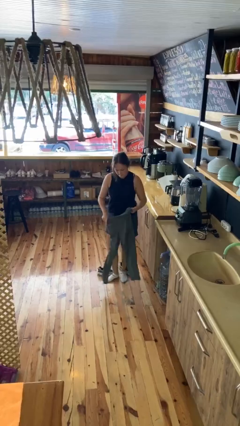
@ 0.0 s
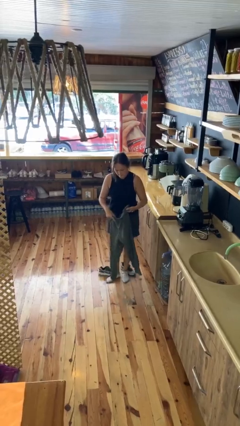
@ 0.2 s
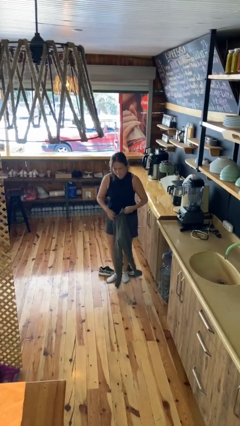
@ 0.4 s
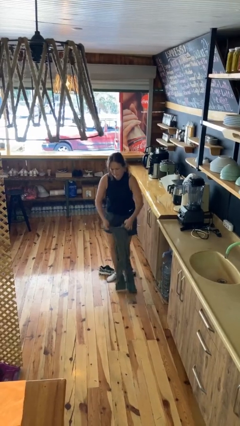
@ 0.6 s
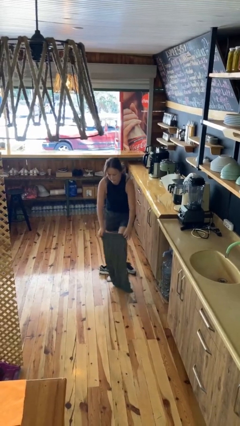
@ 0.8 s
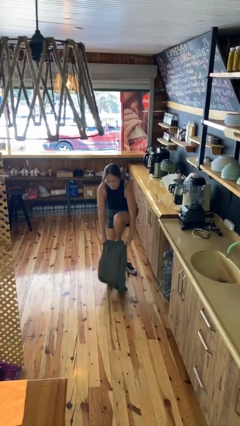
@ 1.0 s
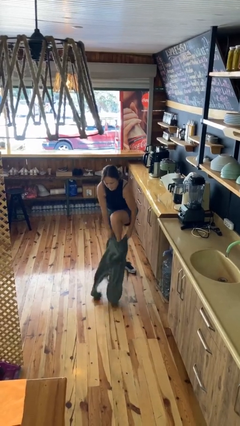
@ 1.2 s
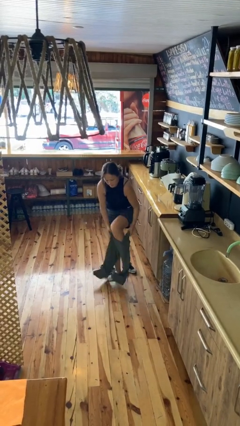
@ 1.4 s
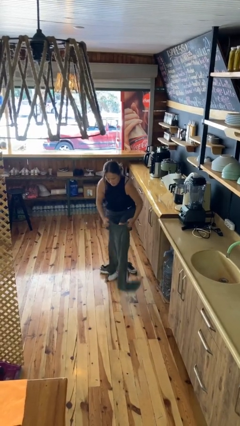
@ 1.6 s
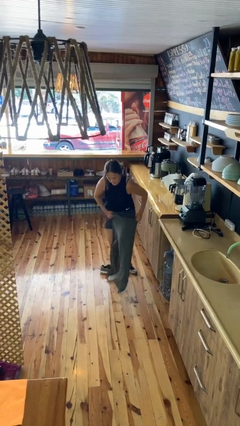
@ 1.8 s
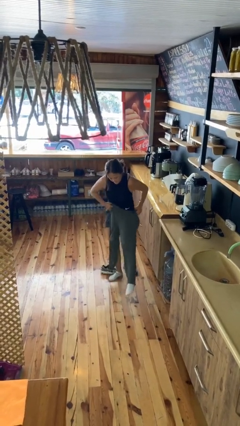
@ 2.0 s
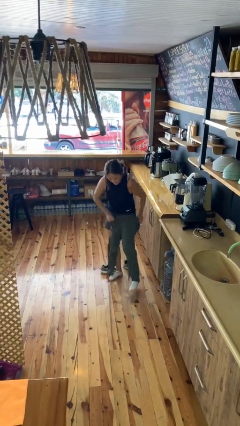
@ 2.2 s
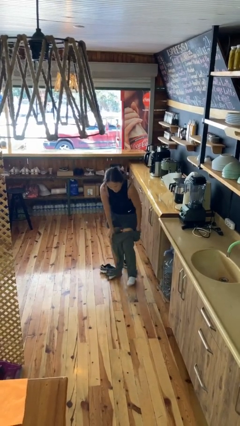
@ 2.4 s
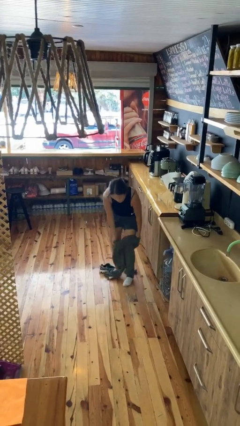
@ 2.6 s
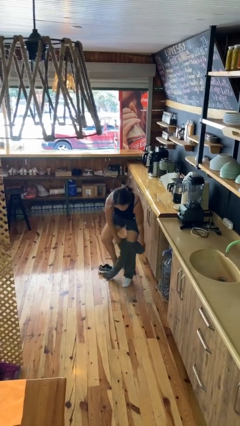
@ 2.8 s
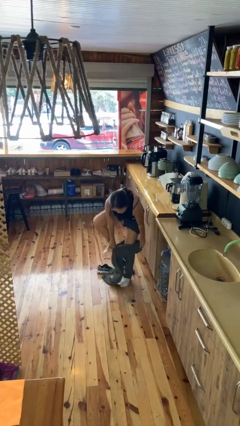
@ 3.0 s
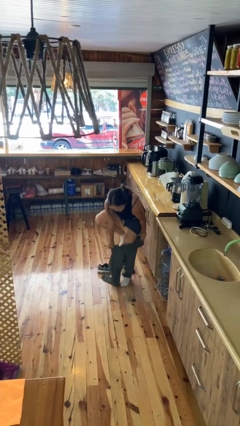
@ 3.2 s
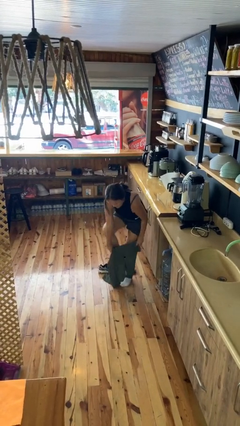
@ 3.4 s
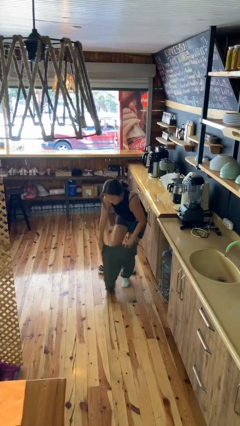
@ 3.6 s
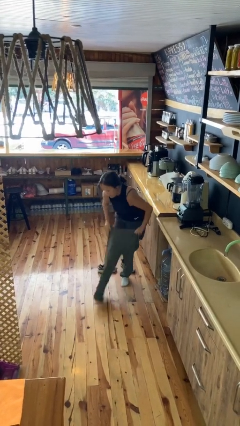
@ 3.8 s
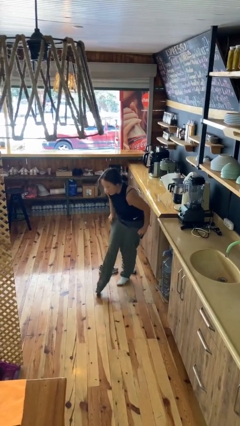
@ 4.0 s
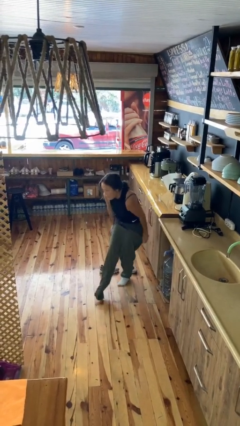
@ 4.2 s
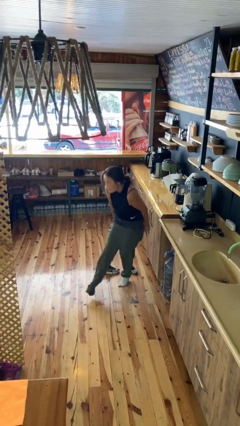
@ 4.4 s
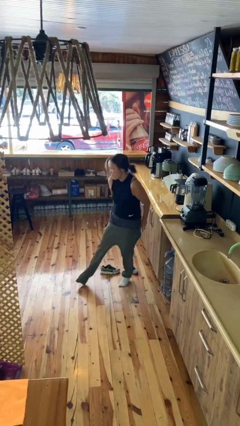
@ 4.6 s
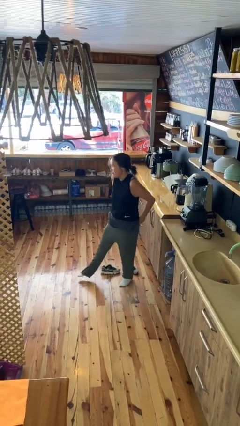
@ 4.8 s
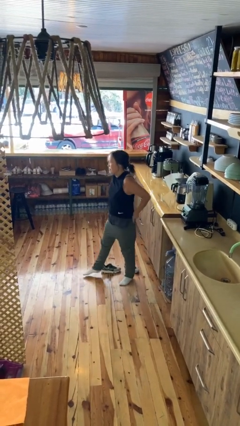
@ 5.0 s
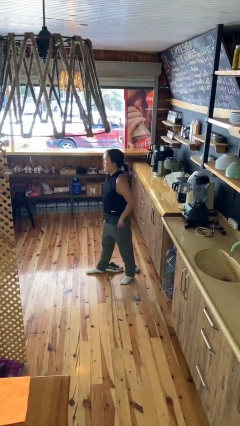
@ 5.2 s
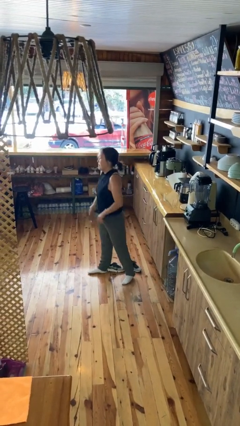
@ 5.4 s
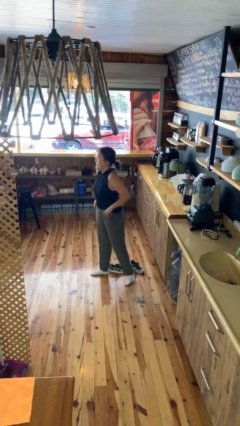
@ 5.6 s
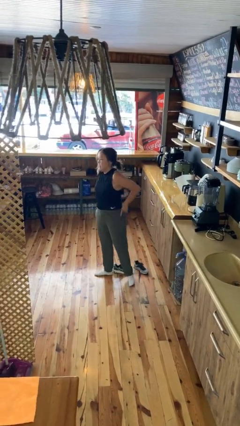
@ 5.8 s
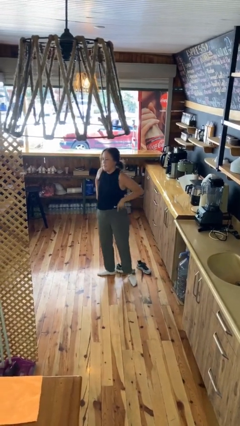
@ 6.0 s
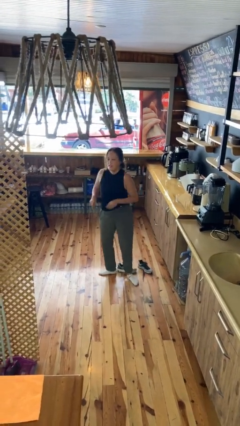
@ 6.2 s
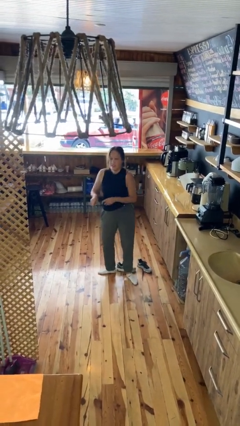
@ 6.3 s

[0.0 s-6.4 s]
person puts on pants

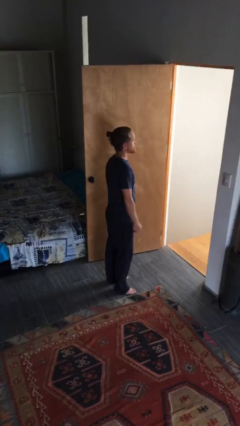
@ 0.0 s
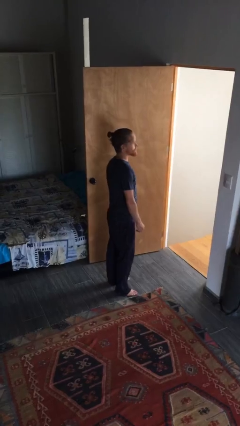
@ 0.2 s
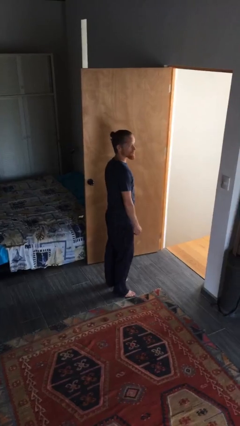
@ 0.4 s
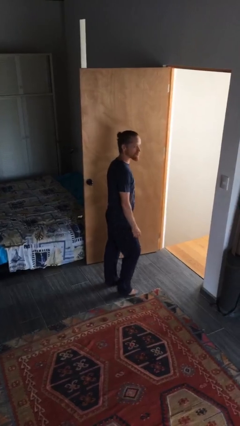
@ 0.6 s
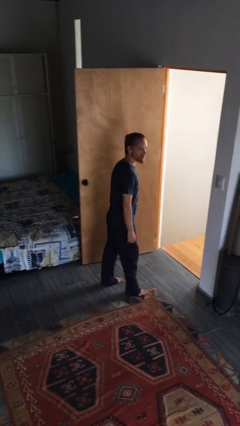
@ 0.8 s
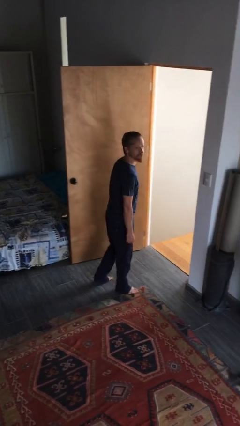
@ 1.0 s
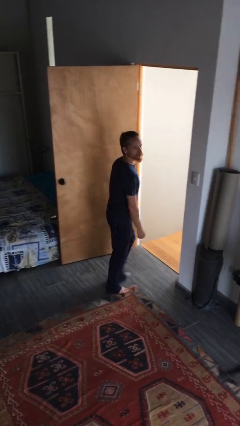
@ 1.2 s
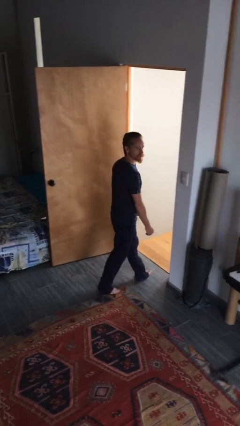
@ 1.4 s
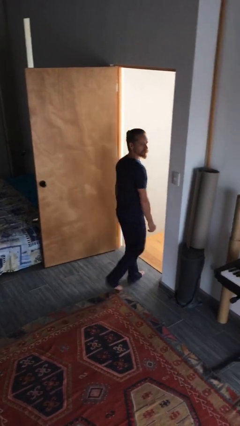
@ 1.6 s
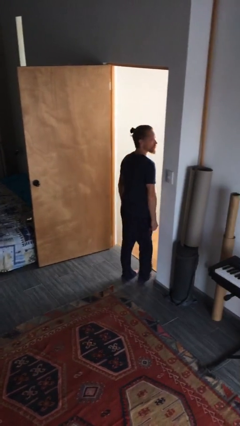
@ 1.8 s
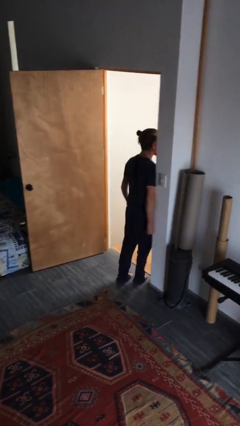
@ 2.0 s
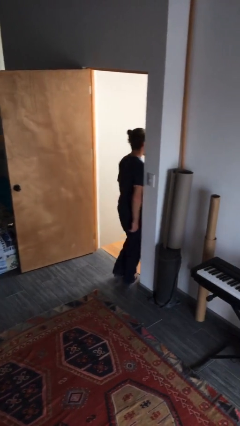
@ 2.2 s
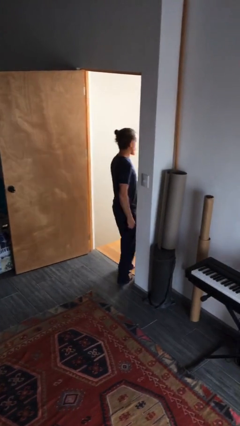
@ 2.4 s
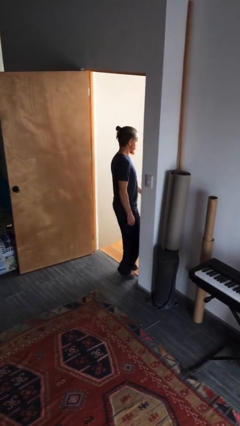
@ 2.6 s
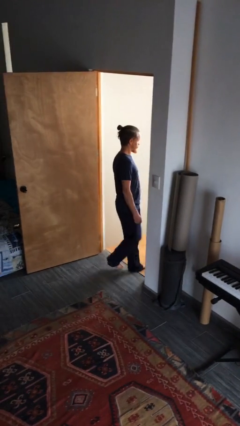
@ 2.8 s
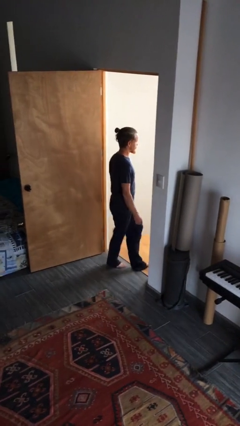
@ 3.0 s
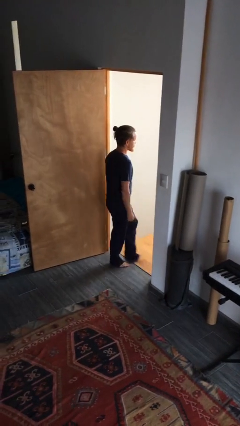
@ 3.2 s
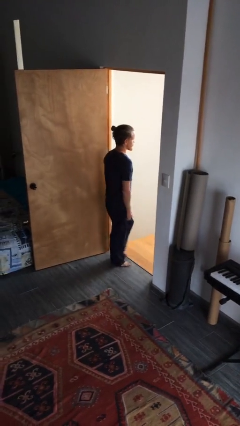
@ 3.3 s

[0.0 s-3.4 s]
person bumps into wall

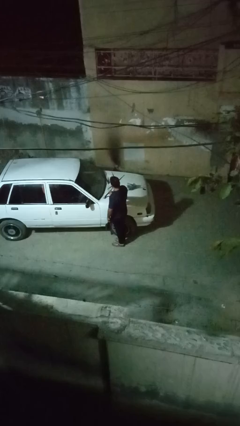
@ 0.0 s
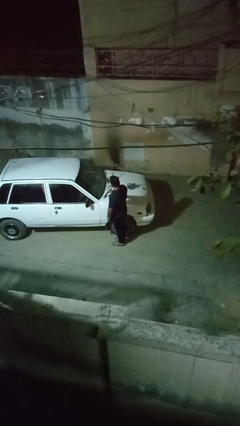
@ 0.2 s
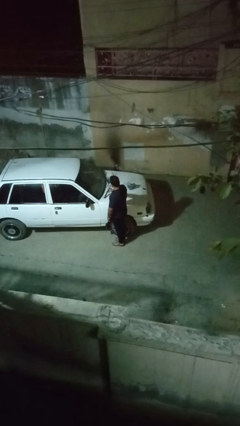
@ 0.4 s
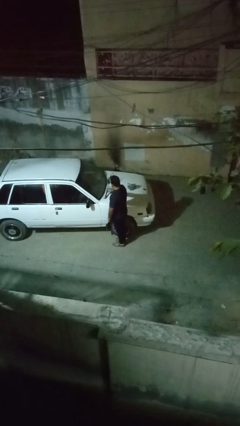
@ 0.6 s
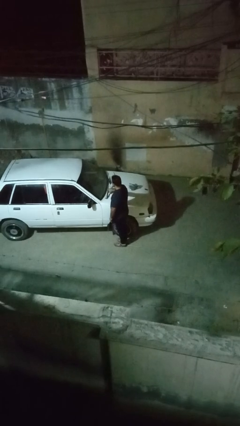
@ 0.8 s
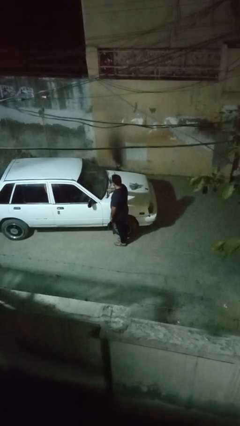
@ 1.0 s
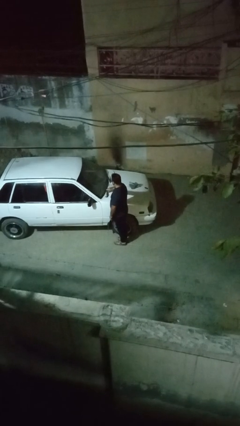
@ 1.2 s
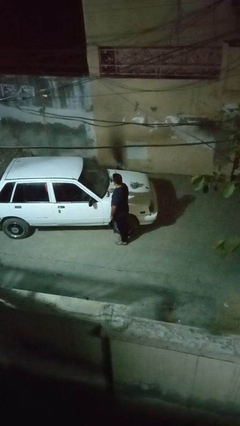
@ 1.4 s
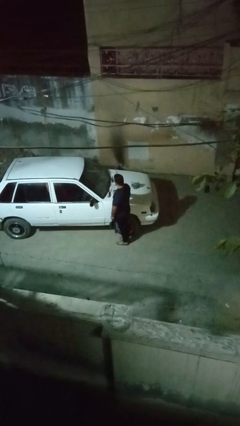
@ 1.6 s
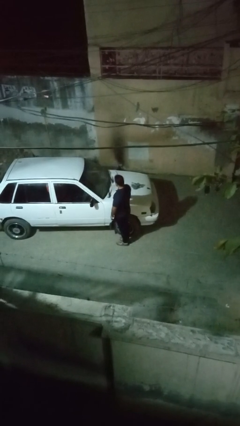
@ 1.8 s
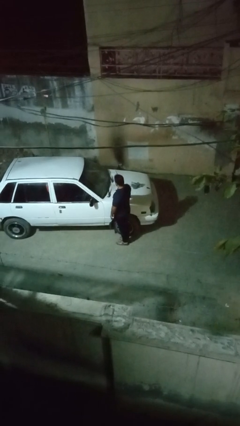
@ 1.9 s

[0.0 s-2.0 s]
person flips down car wipers

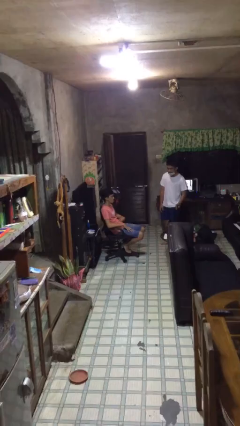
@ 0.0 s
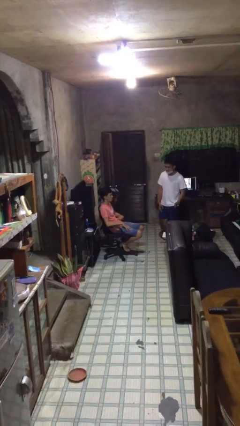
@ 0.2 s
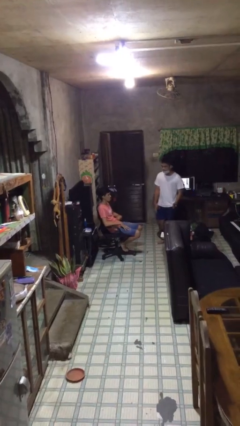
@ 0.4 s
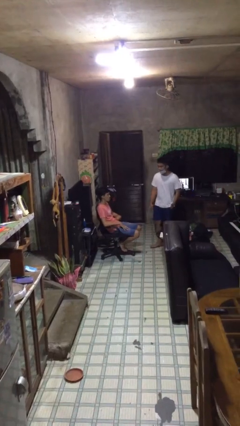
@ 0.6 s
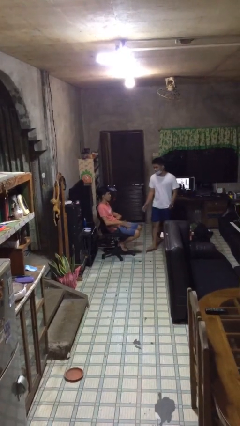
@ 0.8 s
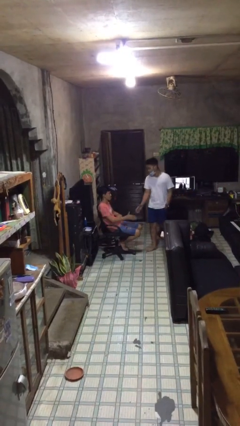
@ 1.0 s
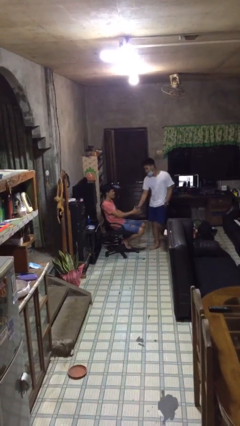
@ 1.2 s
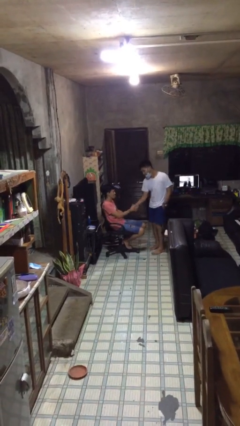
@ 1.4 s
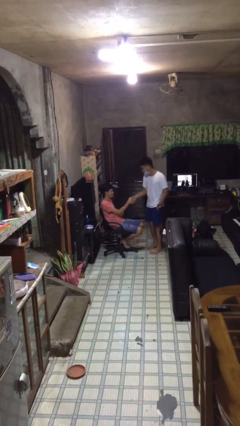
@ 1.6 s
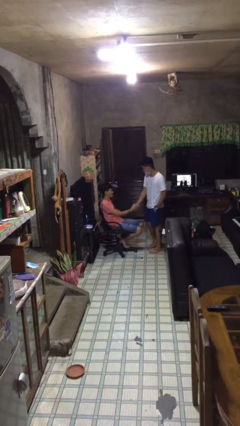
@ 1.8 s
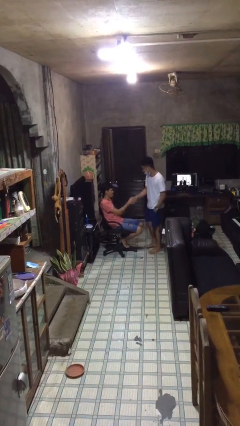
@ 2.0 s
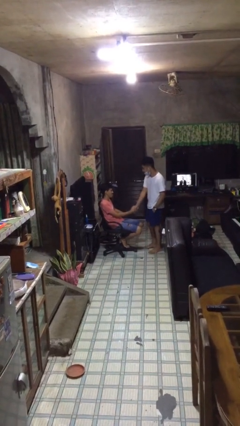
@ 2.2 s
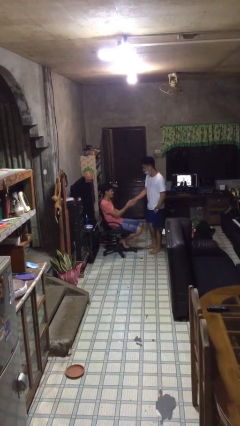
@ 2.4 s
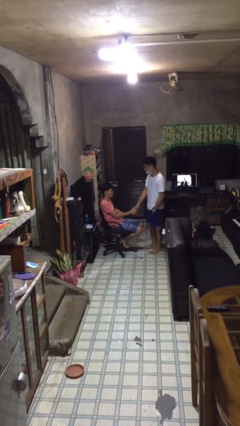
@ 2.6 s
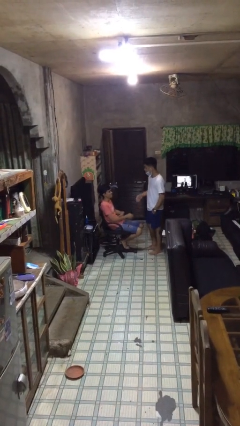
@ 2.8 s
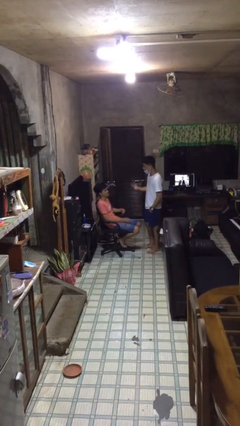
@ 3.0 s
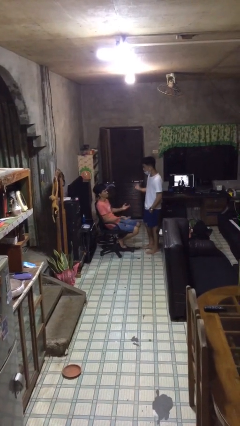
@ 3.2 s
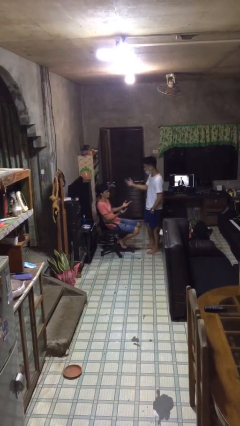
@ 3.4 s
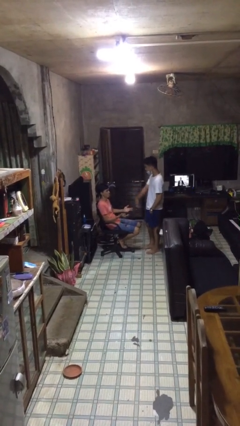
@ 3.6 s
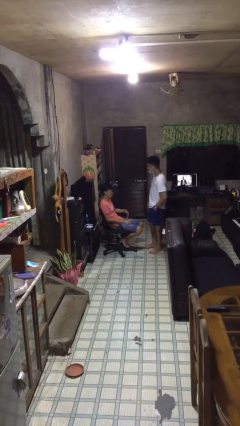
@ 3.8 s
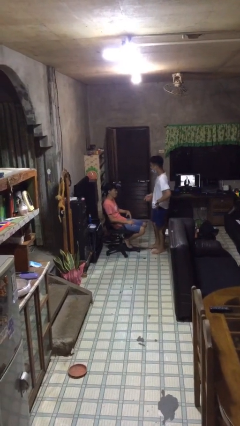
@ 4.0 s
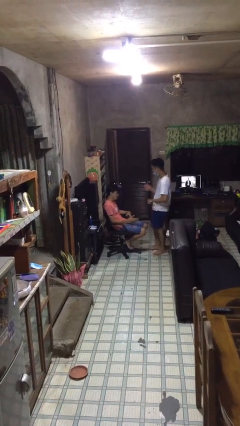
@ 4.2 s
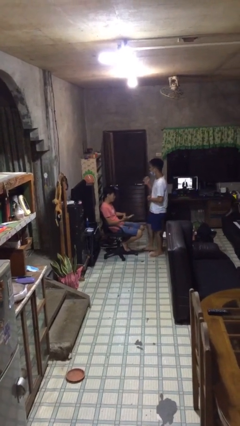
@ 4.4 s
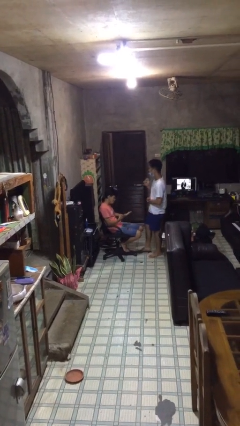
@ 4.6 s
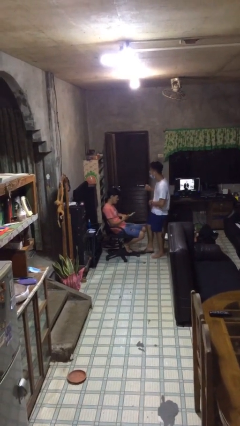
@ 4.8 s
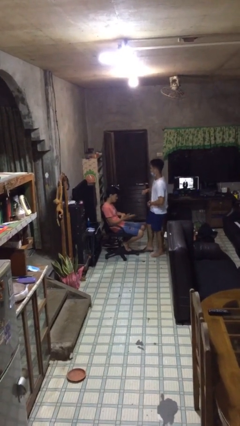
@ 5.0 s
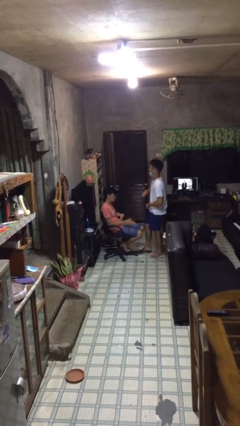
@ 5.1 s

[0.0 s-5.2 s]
person shakes hand

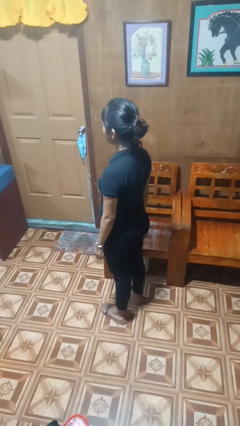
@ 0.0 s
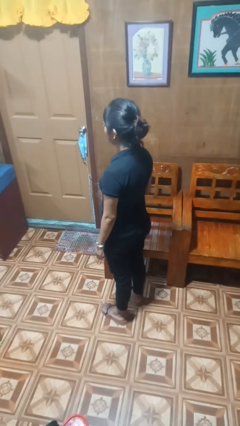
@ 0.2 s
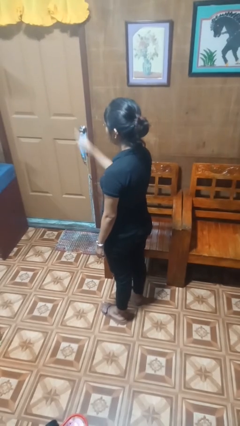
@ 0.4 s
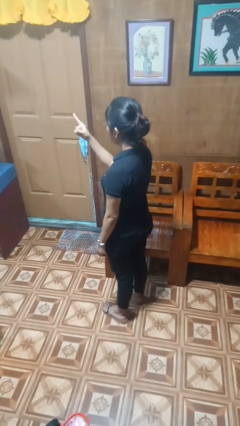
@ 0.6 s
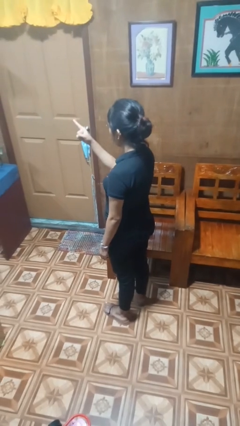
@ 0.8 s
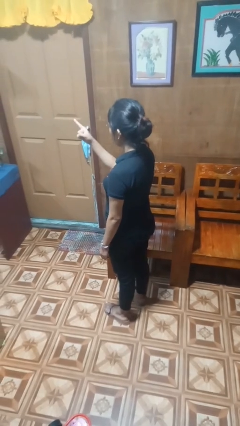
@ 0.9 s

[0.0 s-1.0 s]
person points at person
